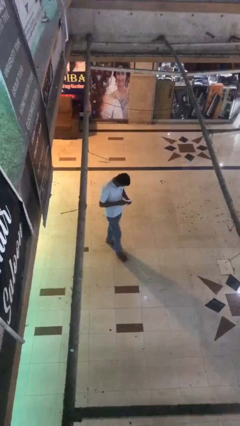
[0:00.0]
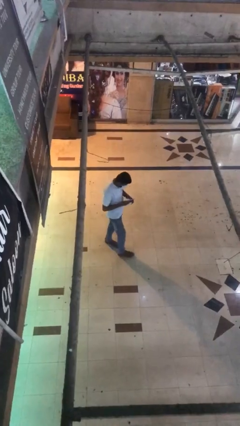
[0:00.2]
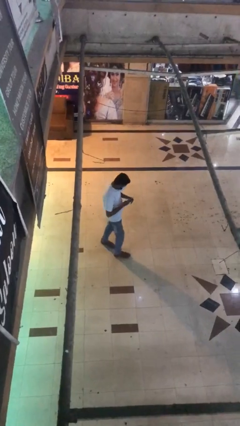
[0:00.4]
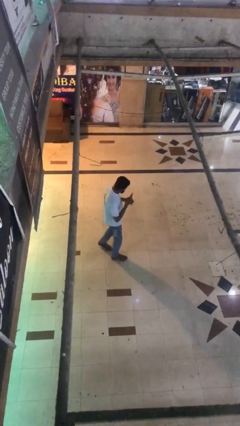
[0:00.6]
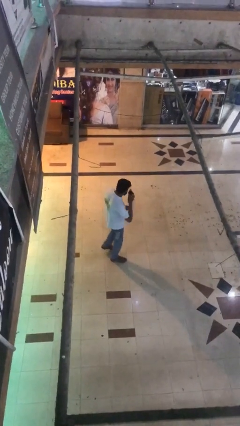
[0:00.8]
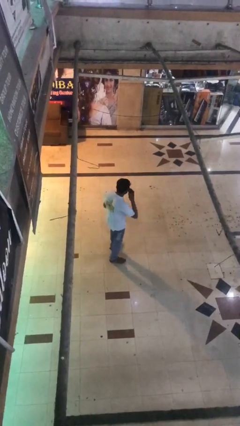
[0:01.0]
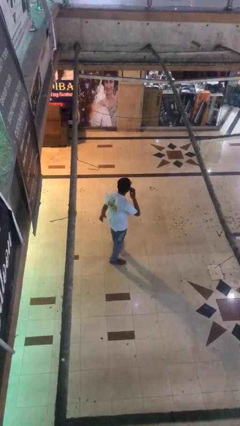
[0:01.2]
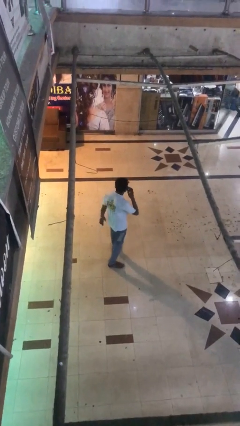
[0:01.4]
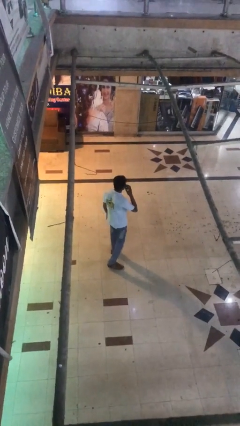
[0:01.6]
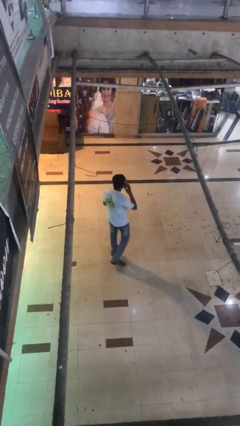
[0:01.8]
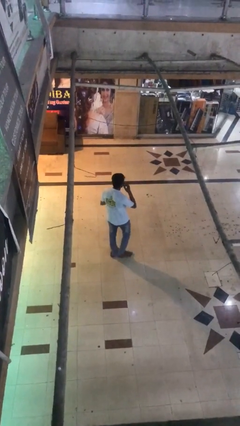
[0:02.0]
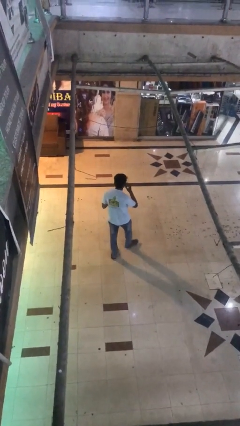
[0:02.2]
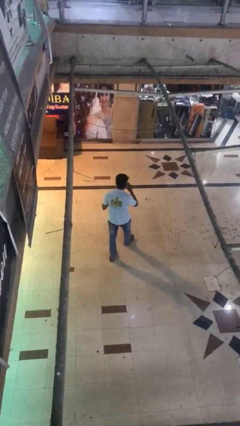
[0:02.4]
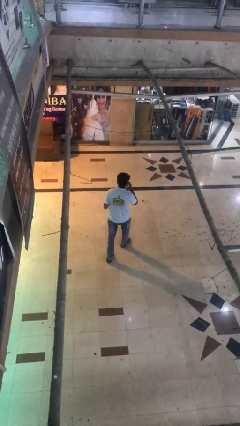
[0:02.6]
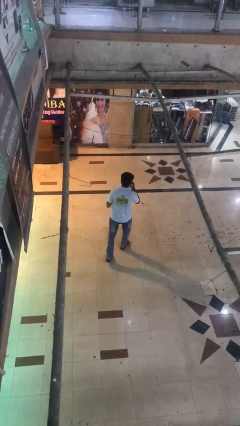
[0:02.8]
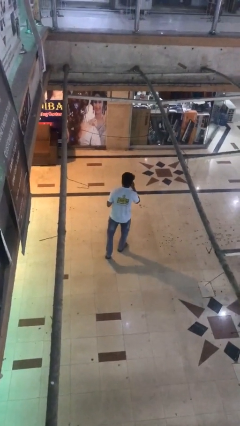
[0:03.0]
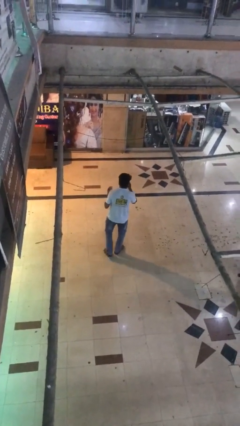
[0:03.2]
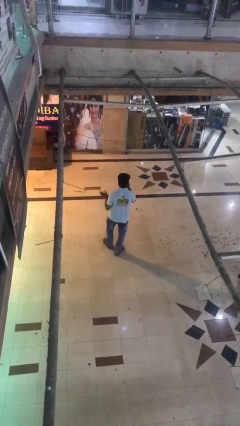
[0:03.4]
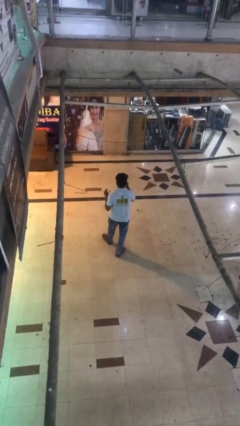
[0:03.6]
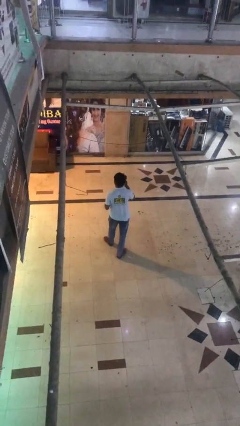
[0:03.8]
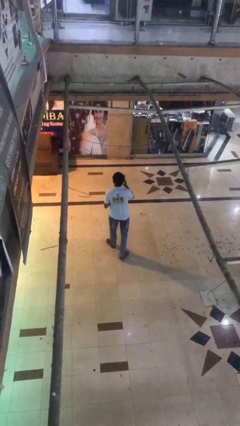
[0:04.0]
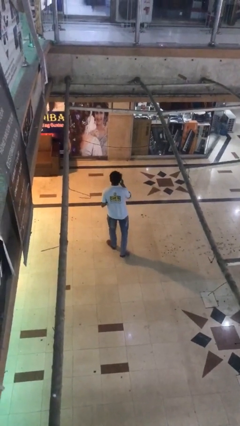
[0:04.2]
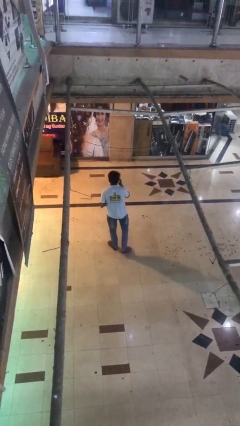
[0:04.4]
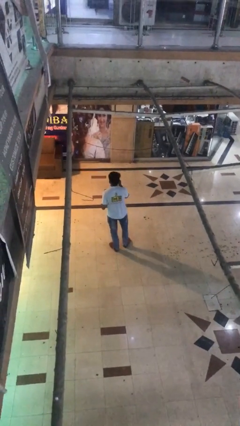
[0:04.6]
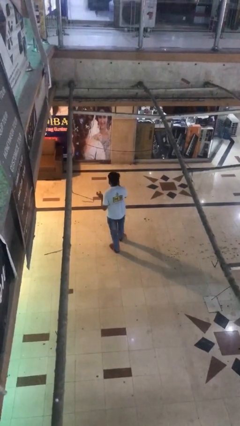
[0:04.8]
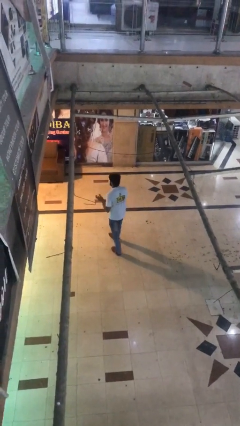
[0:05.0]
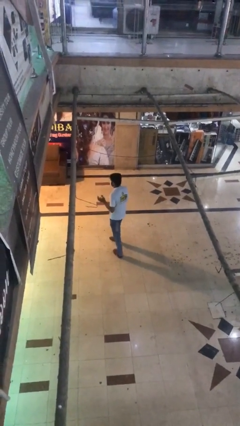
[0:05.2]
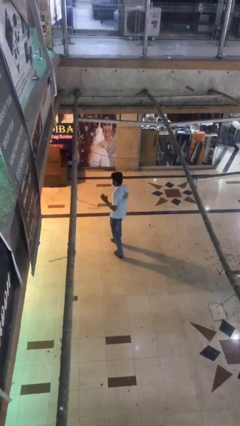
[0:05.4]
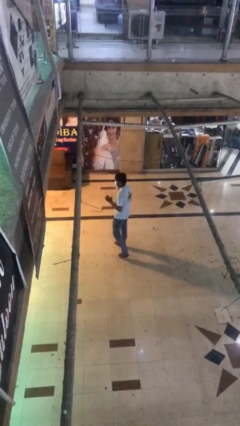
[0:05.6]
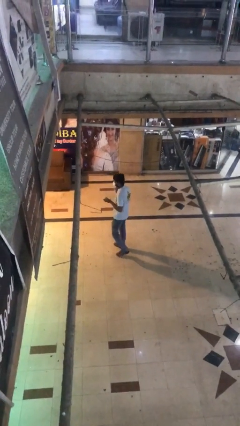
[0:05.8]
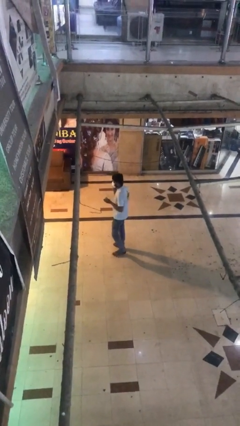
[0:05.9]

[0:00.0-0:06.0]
person talks on phone

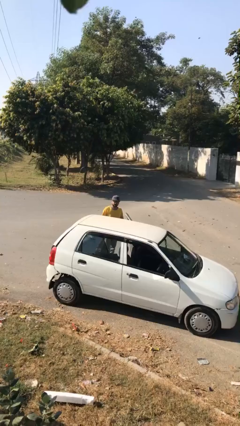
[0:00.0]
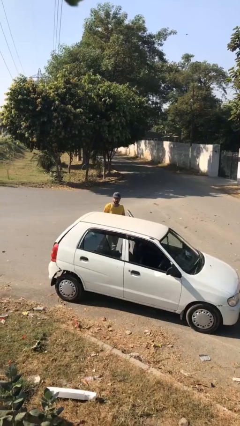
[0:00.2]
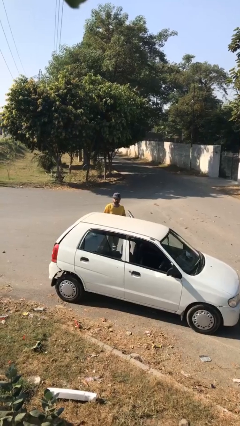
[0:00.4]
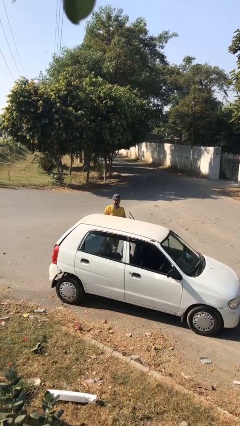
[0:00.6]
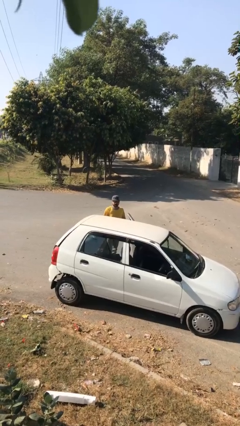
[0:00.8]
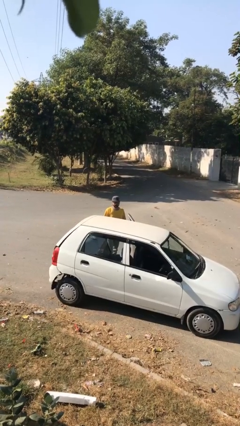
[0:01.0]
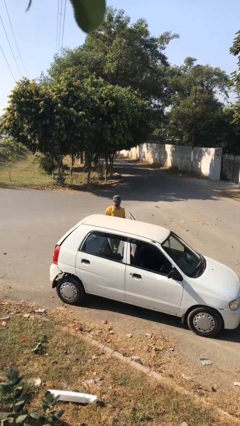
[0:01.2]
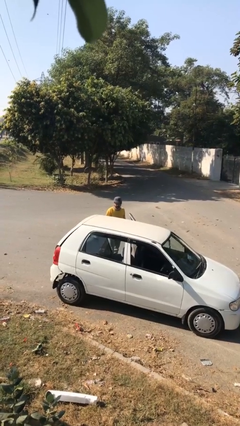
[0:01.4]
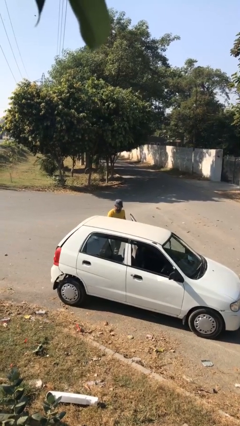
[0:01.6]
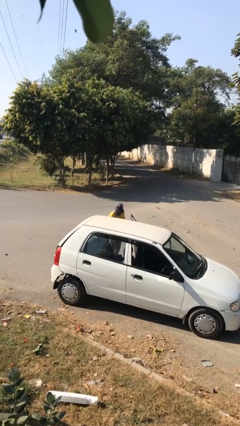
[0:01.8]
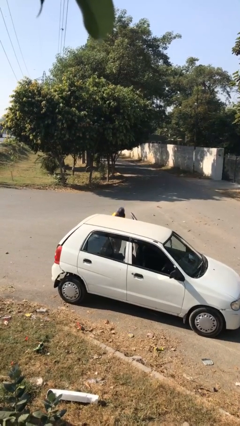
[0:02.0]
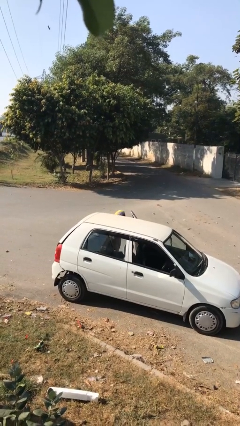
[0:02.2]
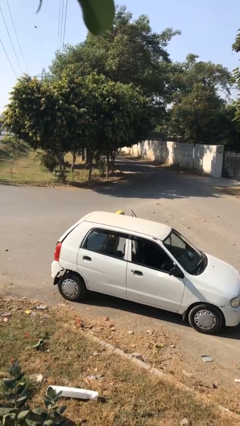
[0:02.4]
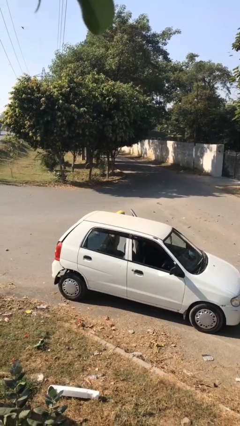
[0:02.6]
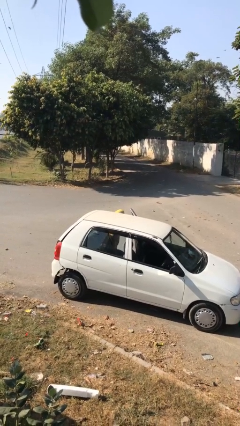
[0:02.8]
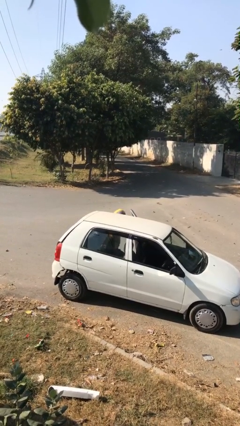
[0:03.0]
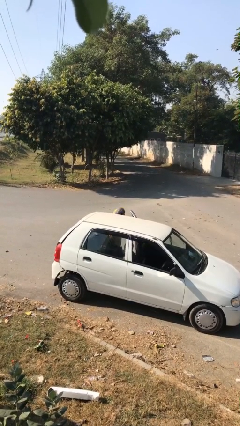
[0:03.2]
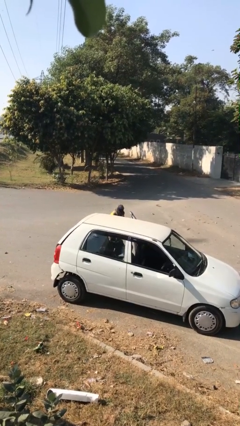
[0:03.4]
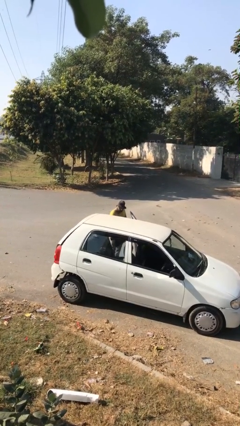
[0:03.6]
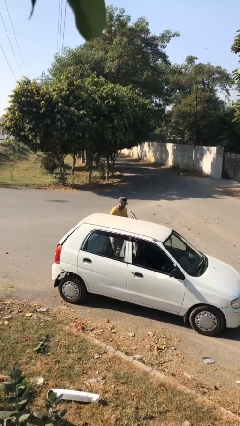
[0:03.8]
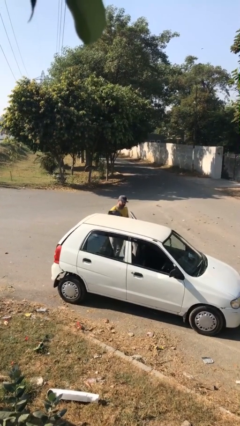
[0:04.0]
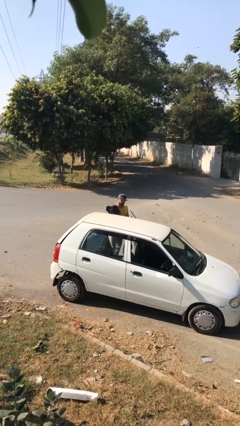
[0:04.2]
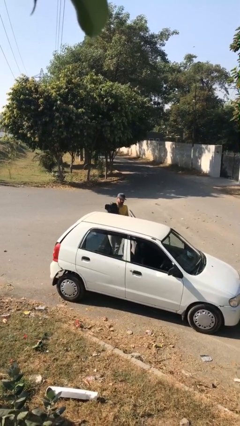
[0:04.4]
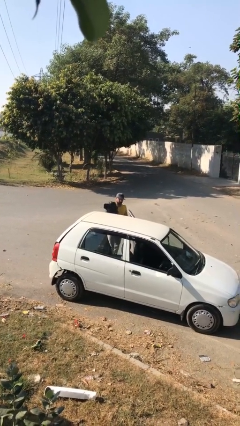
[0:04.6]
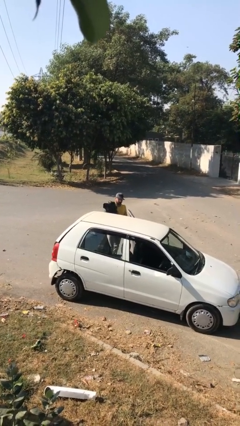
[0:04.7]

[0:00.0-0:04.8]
person unloads car

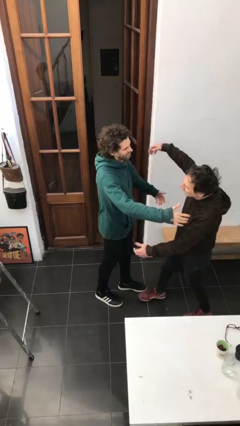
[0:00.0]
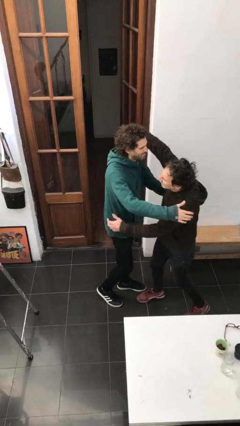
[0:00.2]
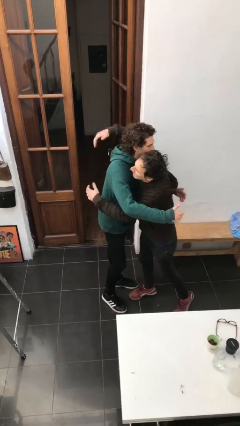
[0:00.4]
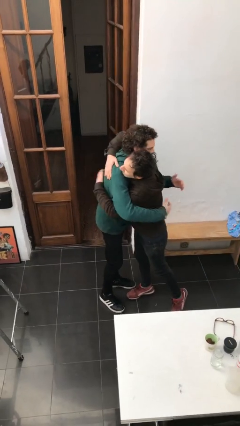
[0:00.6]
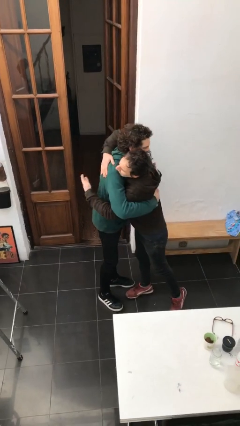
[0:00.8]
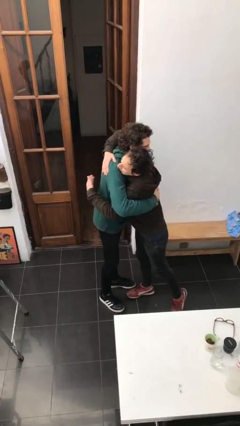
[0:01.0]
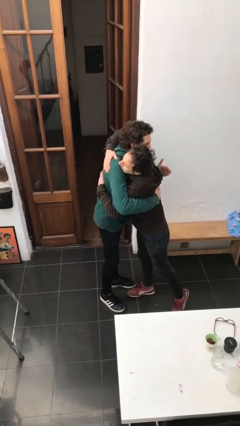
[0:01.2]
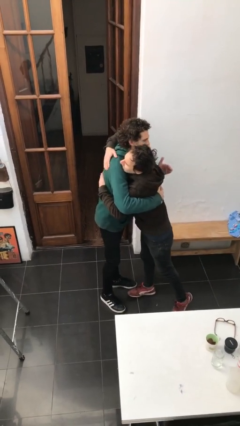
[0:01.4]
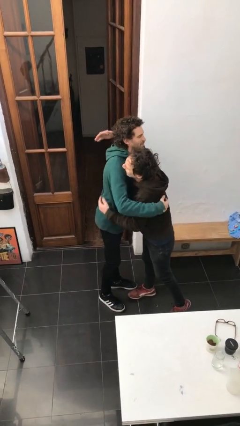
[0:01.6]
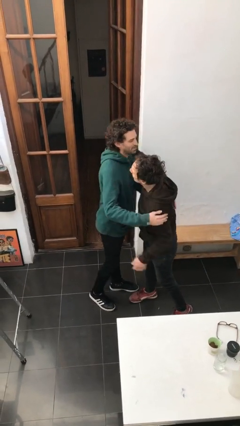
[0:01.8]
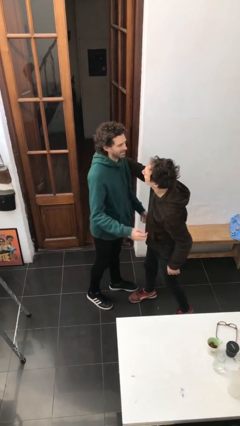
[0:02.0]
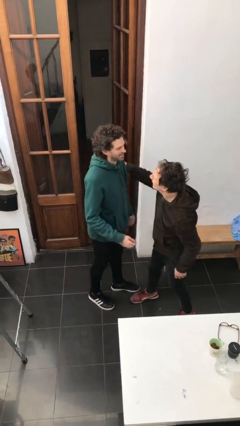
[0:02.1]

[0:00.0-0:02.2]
person embraces person

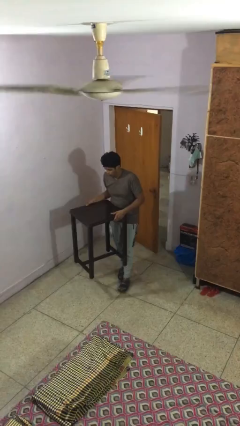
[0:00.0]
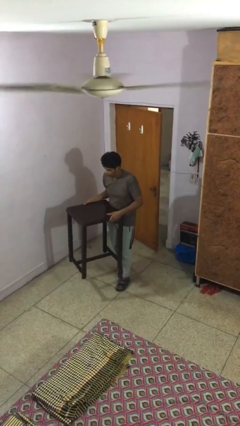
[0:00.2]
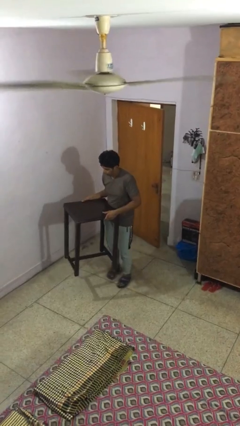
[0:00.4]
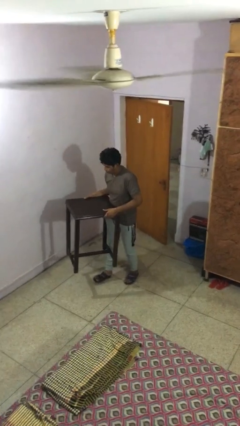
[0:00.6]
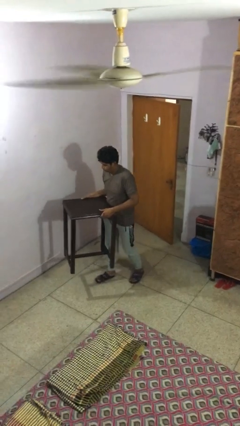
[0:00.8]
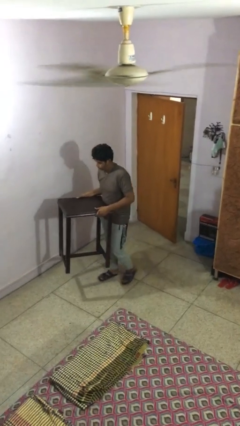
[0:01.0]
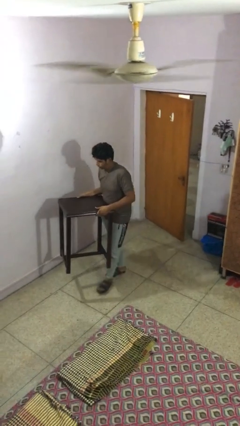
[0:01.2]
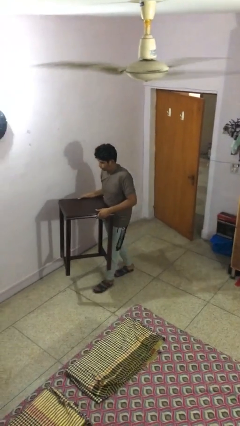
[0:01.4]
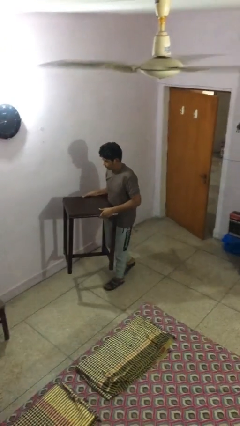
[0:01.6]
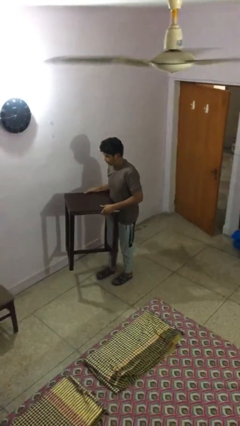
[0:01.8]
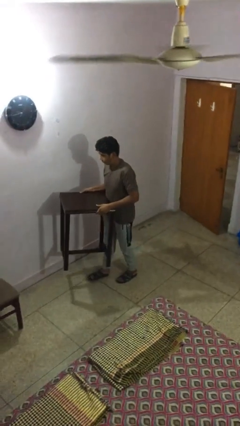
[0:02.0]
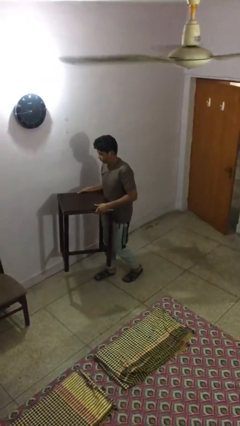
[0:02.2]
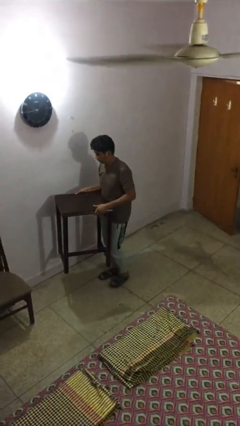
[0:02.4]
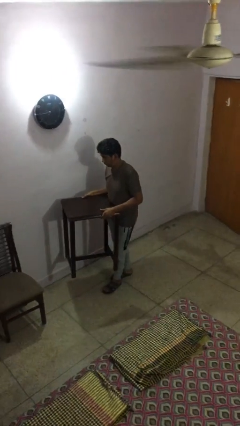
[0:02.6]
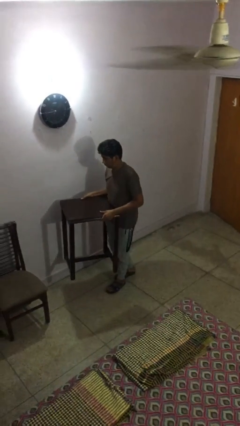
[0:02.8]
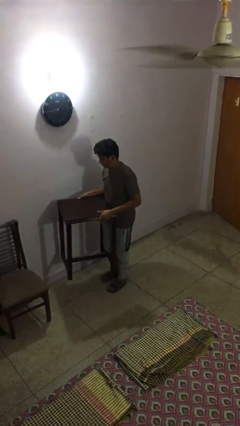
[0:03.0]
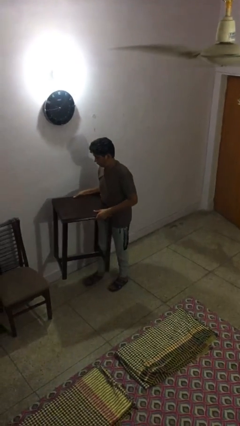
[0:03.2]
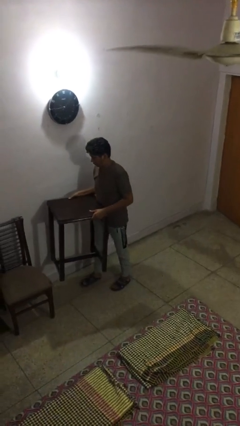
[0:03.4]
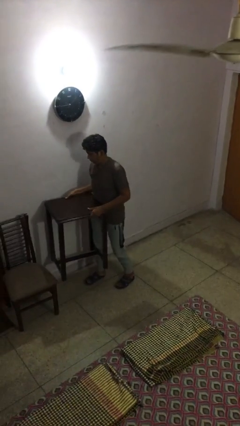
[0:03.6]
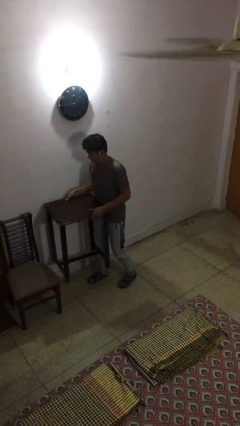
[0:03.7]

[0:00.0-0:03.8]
person carries heavy object

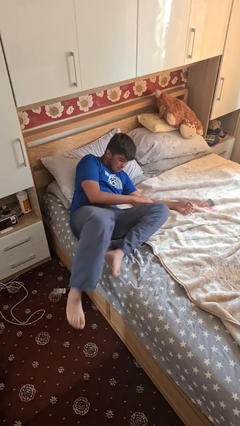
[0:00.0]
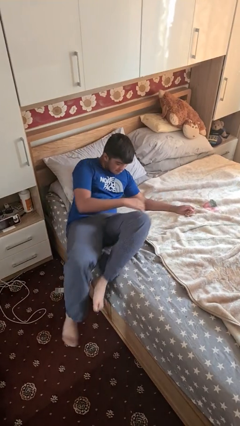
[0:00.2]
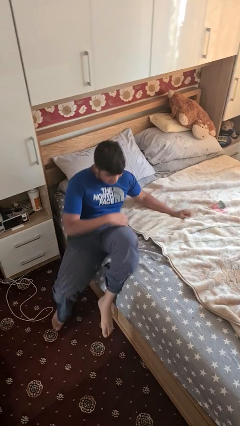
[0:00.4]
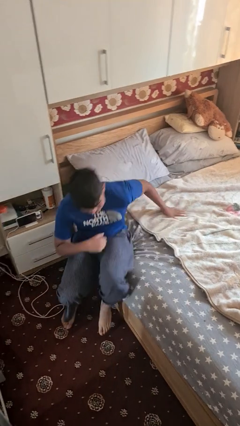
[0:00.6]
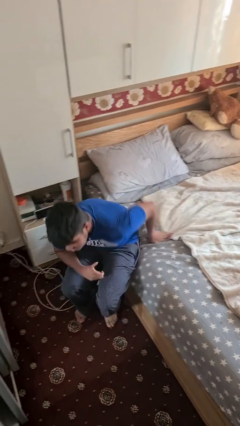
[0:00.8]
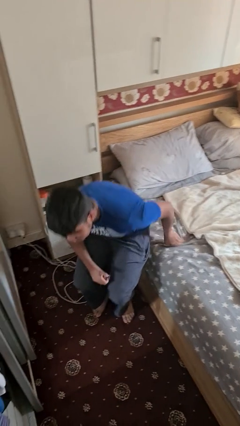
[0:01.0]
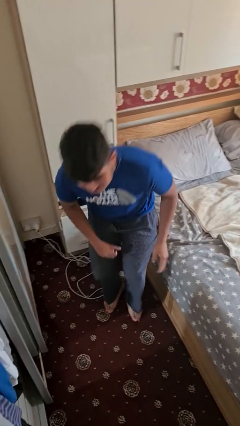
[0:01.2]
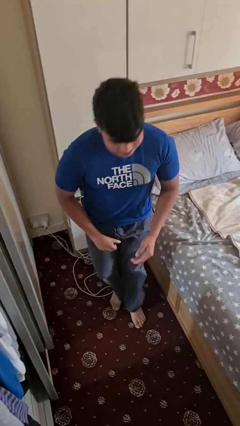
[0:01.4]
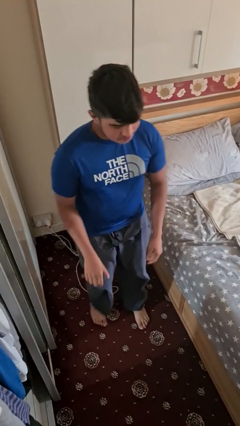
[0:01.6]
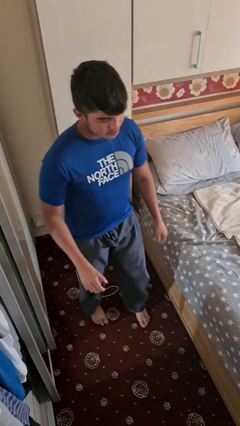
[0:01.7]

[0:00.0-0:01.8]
person stands up
